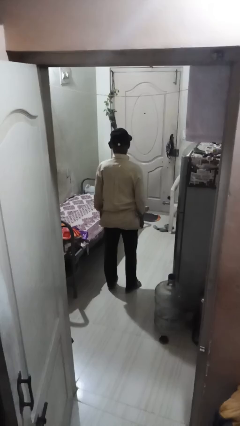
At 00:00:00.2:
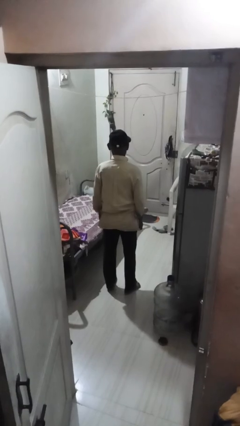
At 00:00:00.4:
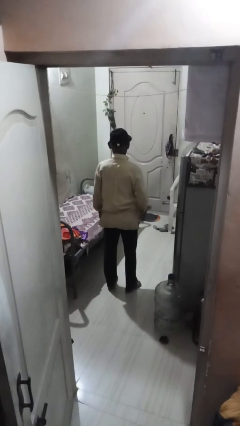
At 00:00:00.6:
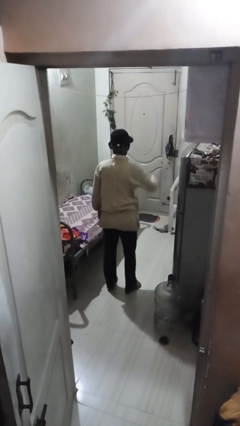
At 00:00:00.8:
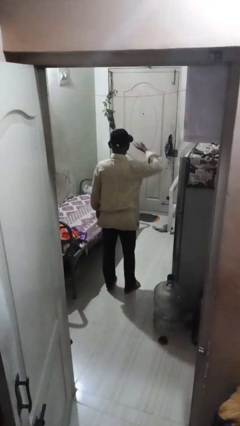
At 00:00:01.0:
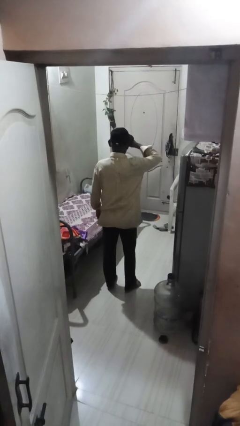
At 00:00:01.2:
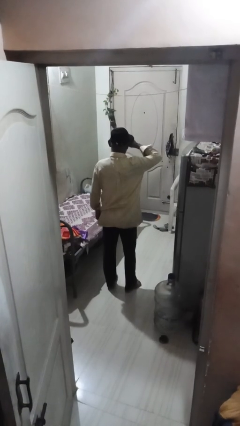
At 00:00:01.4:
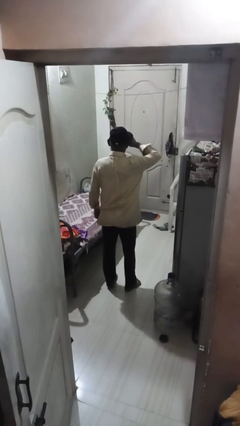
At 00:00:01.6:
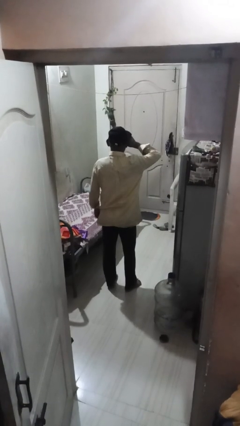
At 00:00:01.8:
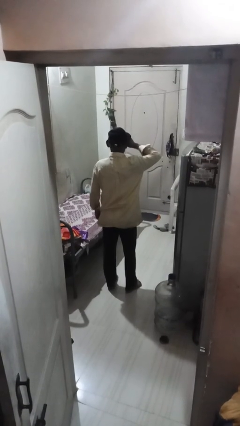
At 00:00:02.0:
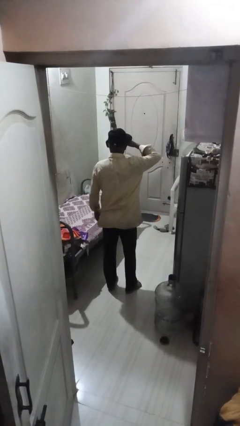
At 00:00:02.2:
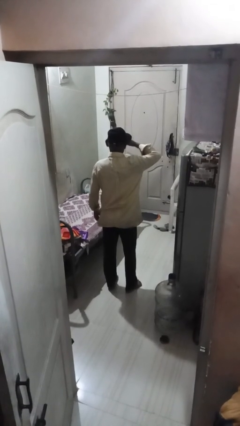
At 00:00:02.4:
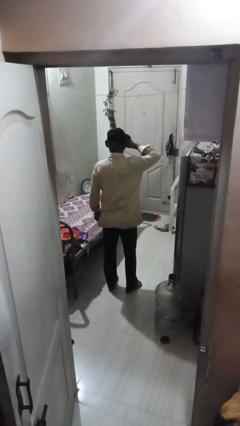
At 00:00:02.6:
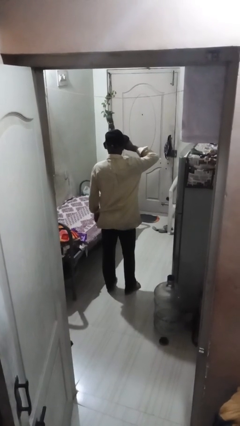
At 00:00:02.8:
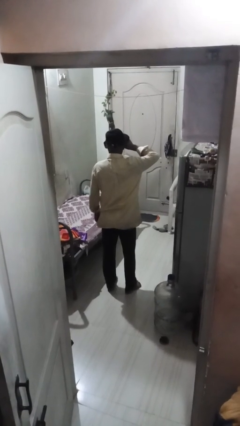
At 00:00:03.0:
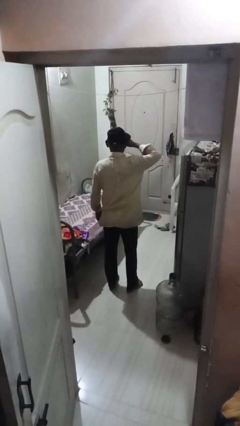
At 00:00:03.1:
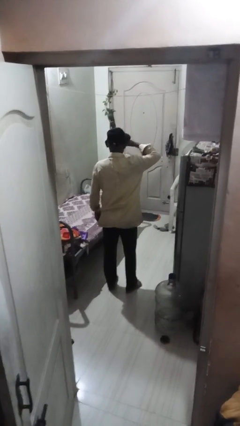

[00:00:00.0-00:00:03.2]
person rubs eyes

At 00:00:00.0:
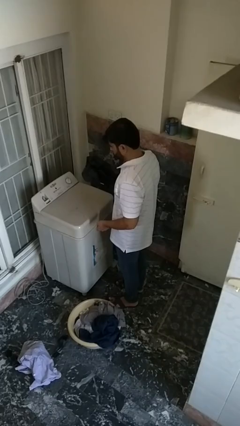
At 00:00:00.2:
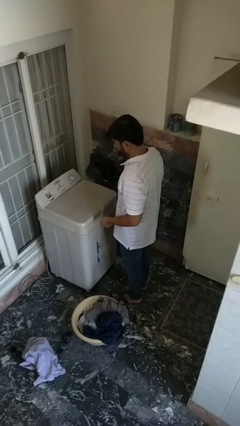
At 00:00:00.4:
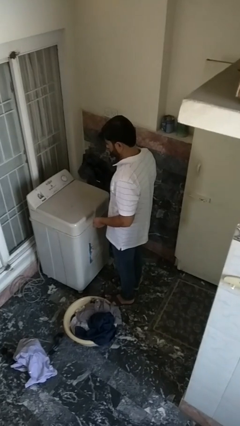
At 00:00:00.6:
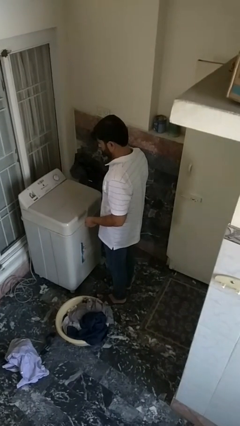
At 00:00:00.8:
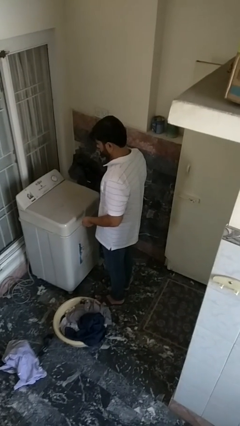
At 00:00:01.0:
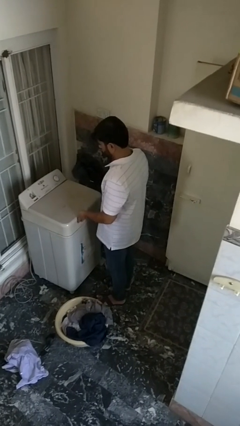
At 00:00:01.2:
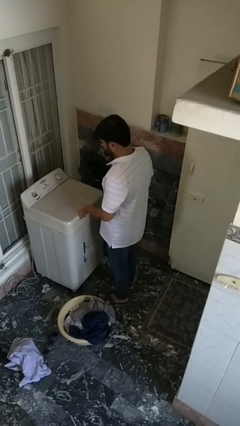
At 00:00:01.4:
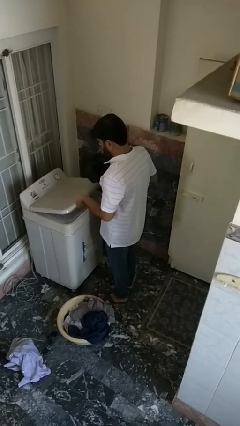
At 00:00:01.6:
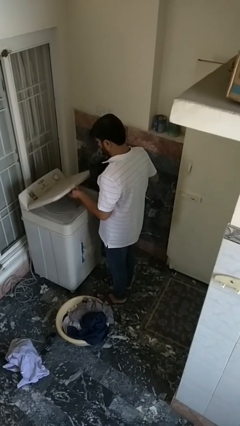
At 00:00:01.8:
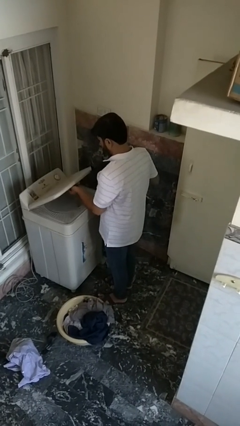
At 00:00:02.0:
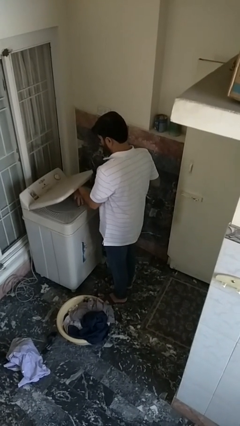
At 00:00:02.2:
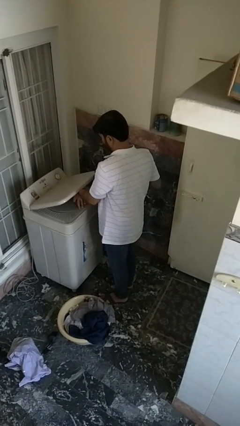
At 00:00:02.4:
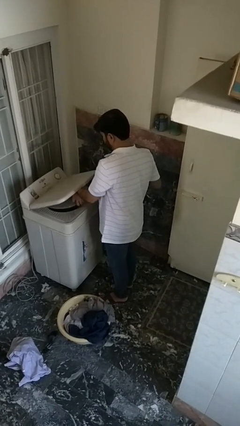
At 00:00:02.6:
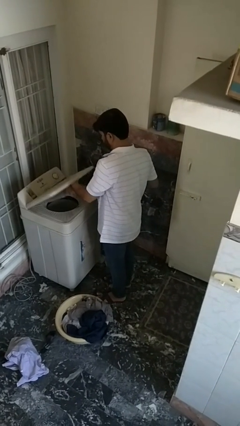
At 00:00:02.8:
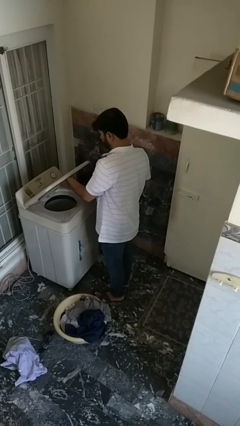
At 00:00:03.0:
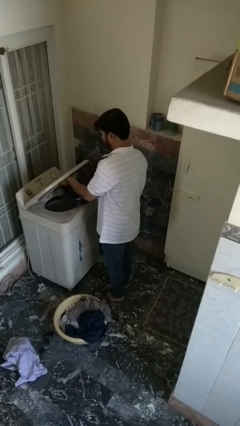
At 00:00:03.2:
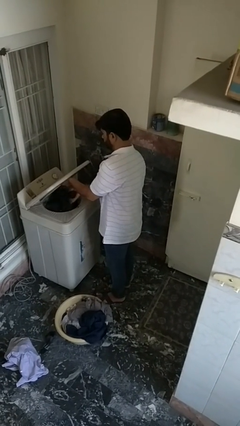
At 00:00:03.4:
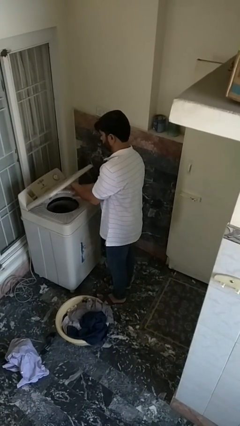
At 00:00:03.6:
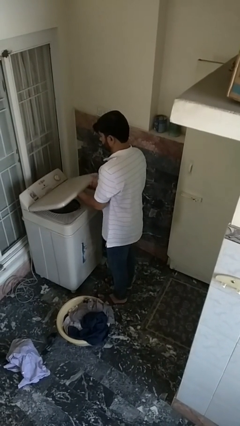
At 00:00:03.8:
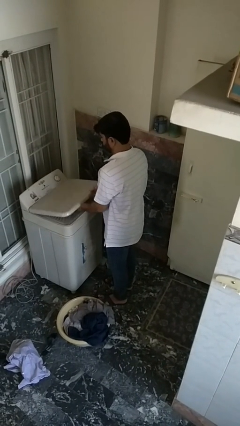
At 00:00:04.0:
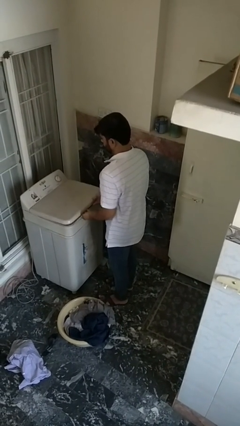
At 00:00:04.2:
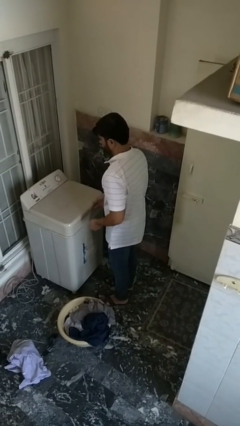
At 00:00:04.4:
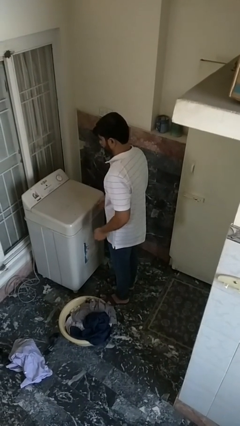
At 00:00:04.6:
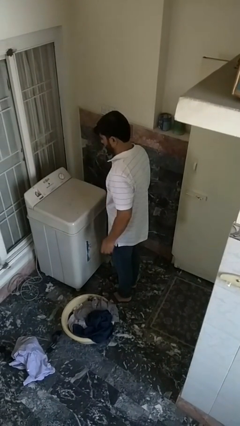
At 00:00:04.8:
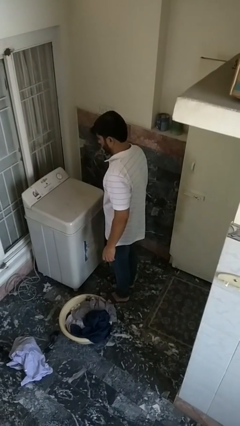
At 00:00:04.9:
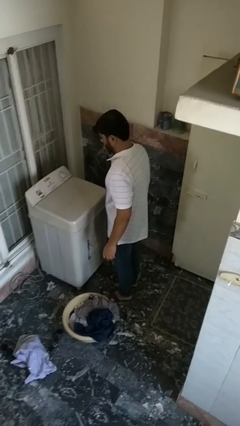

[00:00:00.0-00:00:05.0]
person loads dryer

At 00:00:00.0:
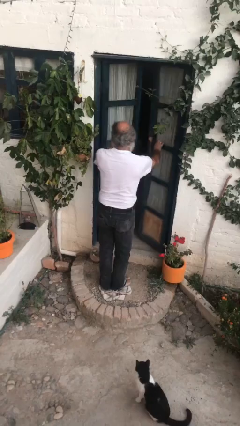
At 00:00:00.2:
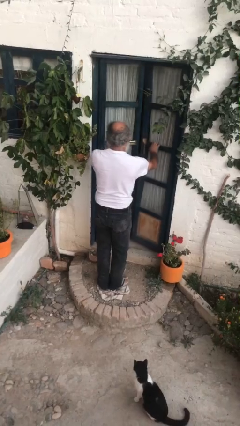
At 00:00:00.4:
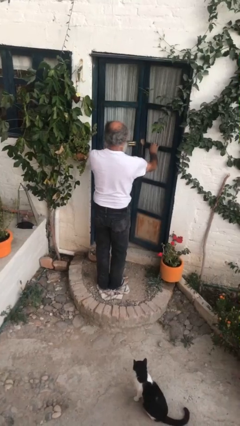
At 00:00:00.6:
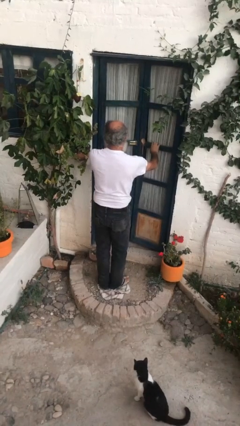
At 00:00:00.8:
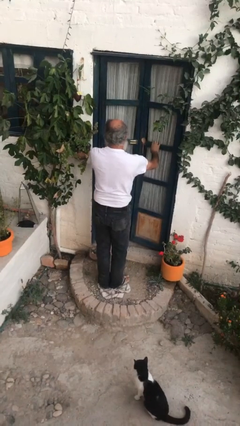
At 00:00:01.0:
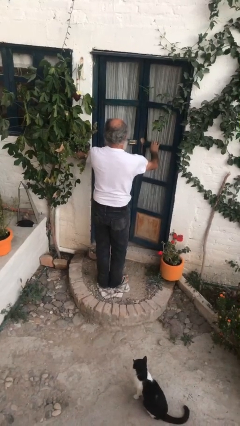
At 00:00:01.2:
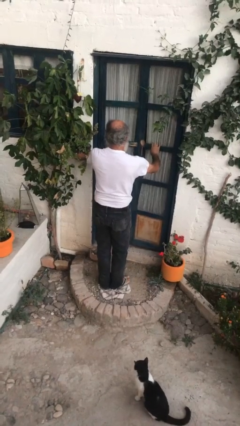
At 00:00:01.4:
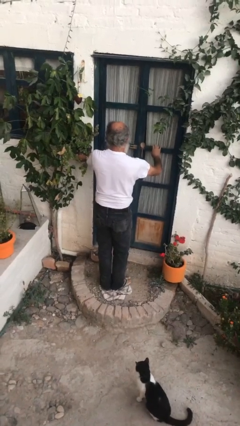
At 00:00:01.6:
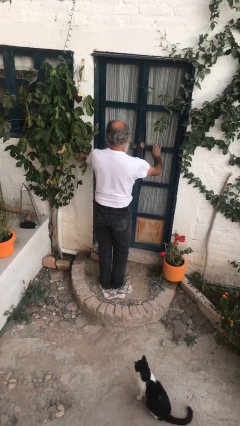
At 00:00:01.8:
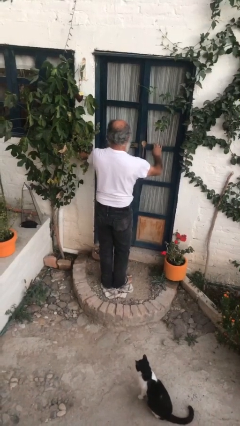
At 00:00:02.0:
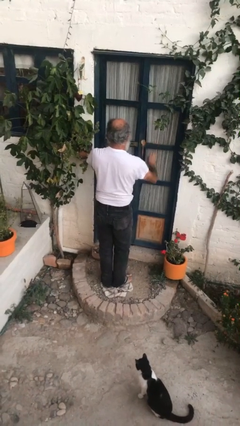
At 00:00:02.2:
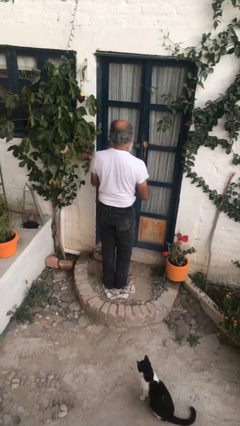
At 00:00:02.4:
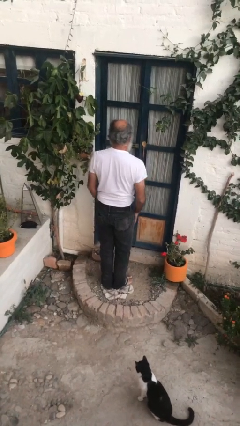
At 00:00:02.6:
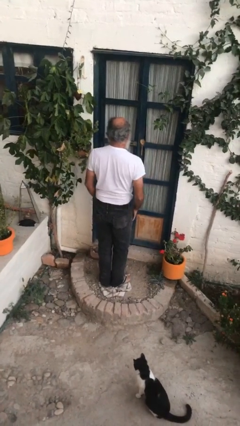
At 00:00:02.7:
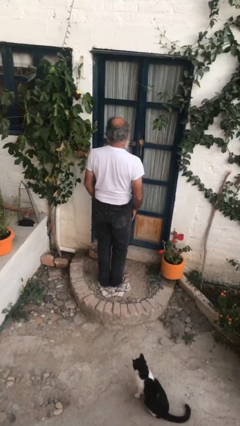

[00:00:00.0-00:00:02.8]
person closes facility door

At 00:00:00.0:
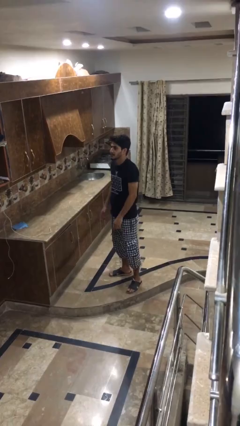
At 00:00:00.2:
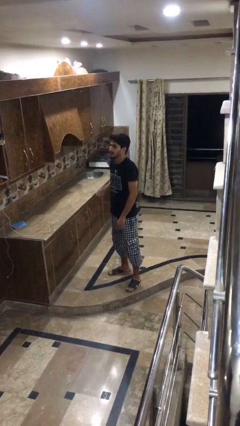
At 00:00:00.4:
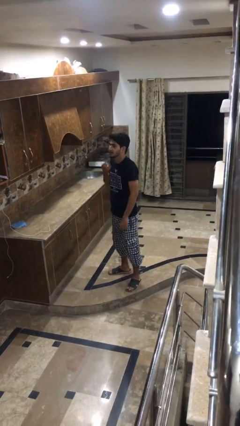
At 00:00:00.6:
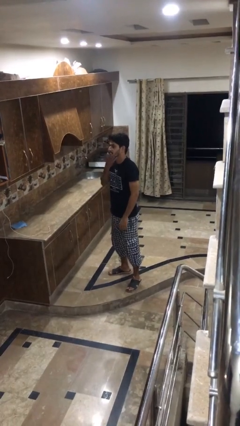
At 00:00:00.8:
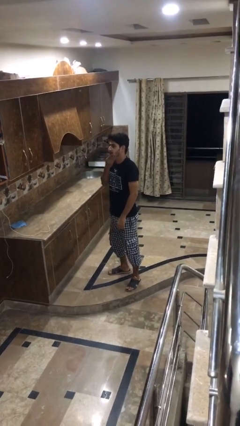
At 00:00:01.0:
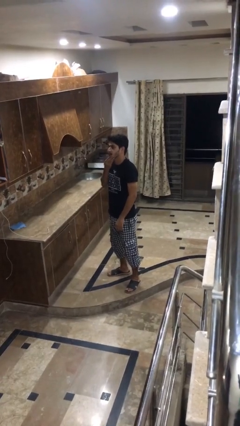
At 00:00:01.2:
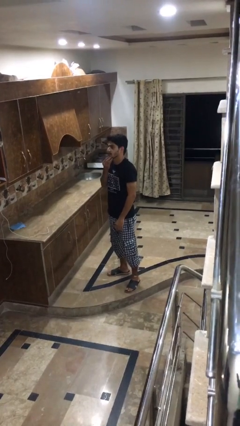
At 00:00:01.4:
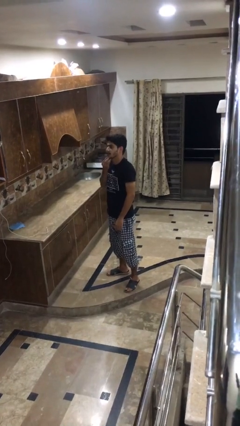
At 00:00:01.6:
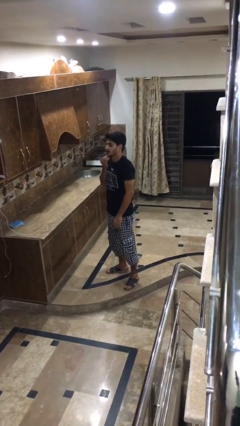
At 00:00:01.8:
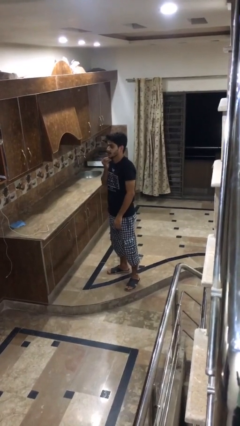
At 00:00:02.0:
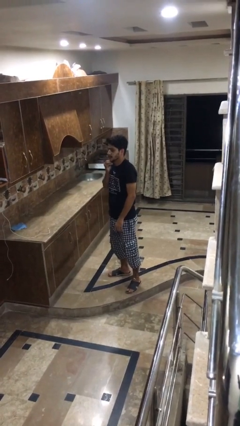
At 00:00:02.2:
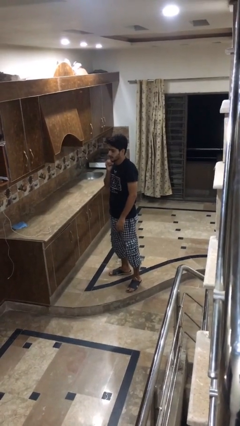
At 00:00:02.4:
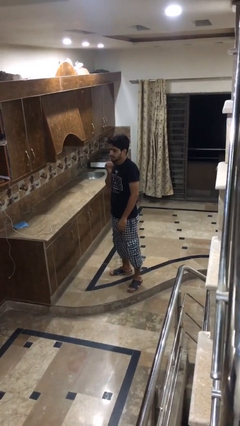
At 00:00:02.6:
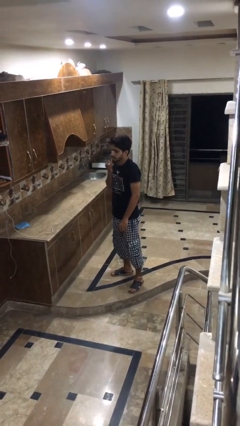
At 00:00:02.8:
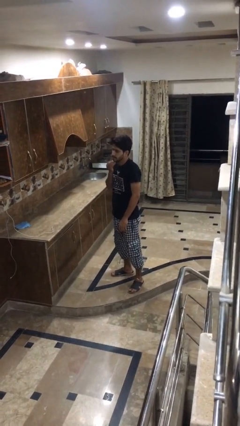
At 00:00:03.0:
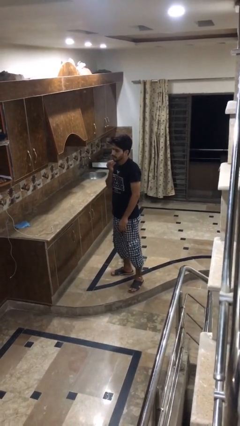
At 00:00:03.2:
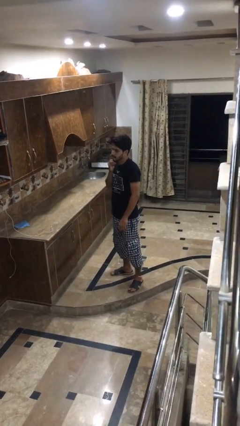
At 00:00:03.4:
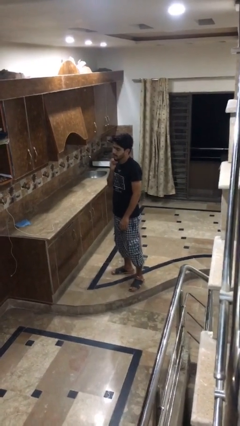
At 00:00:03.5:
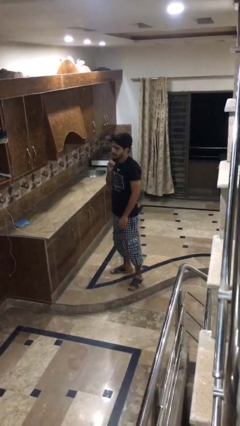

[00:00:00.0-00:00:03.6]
person strokes chin

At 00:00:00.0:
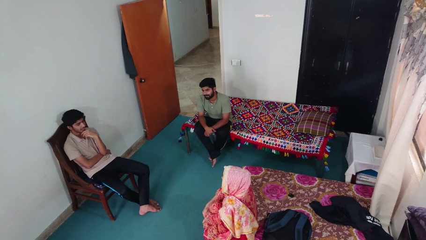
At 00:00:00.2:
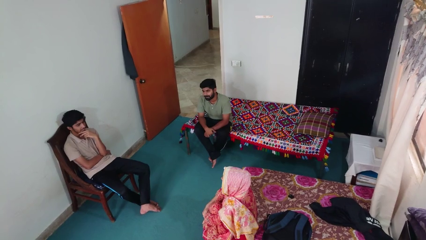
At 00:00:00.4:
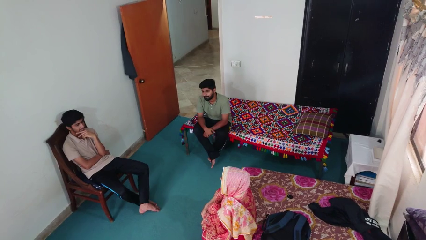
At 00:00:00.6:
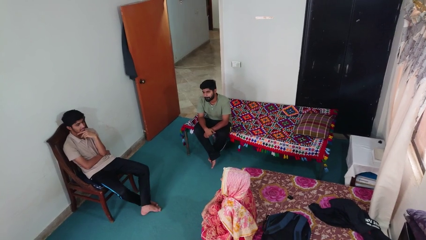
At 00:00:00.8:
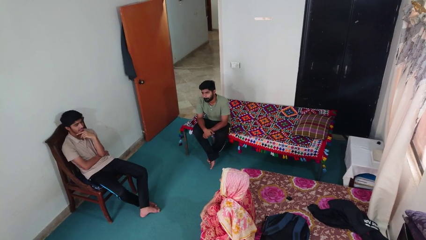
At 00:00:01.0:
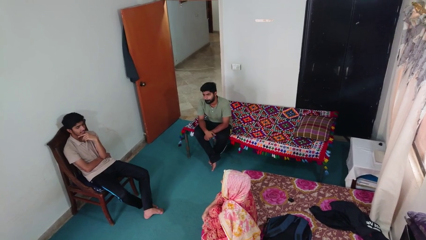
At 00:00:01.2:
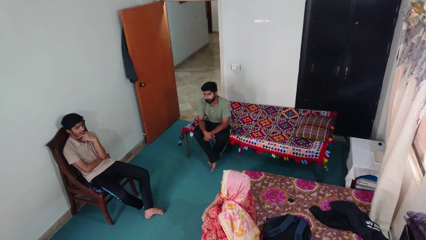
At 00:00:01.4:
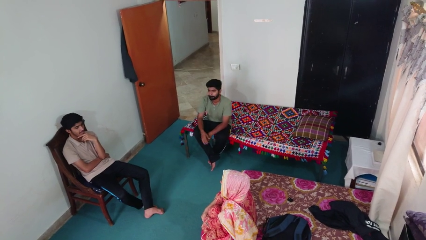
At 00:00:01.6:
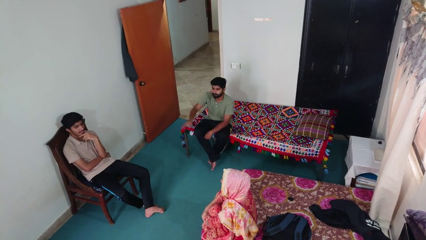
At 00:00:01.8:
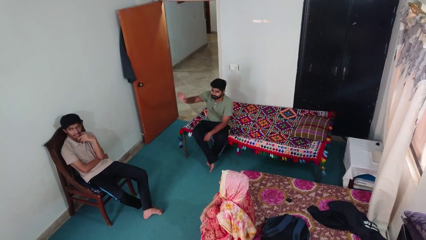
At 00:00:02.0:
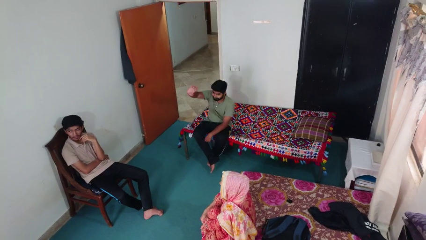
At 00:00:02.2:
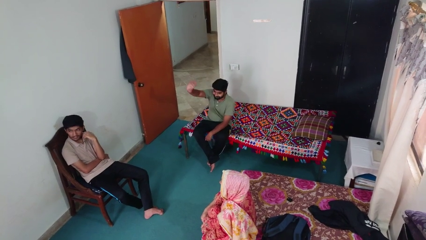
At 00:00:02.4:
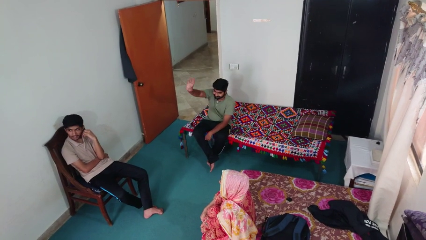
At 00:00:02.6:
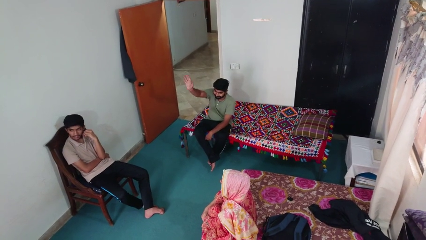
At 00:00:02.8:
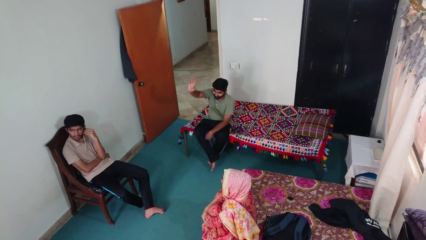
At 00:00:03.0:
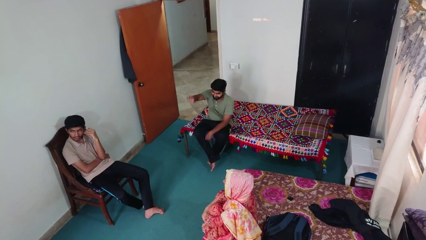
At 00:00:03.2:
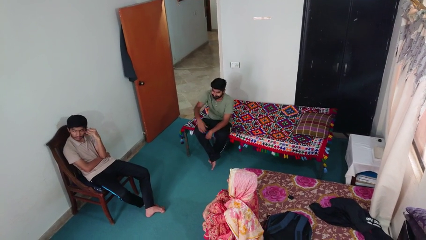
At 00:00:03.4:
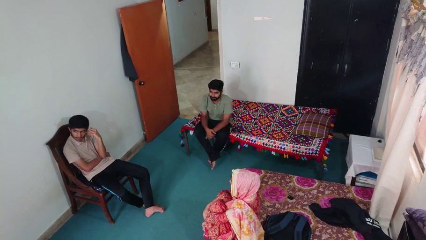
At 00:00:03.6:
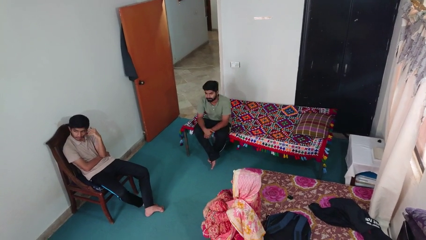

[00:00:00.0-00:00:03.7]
person waves at person
